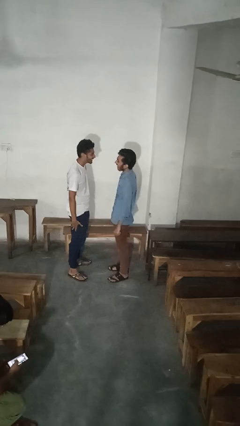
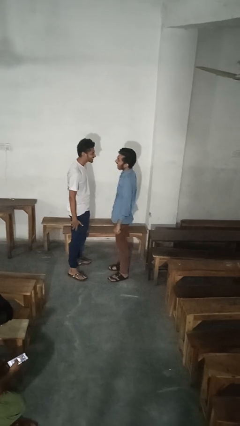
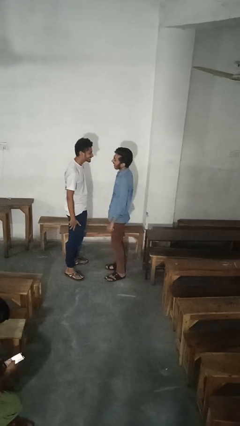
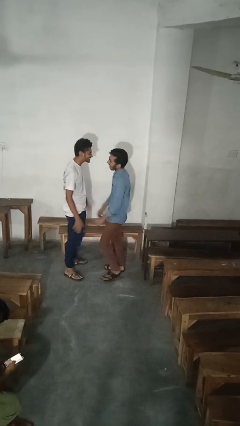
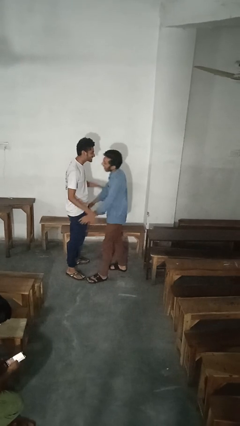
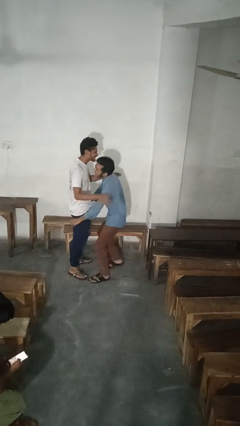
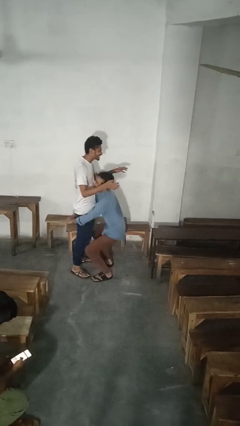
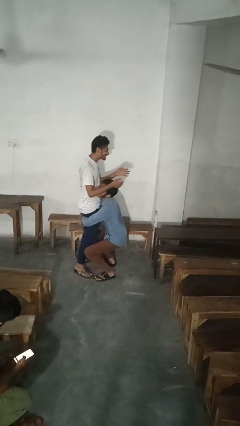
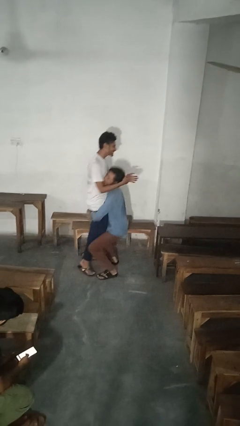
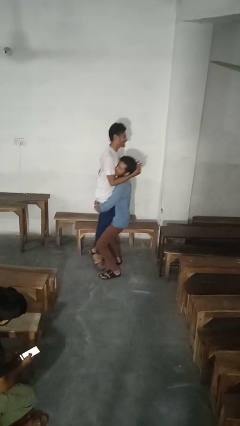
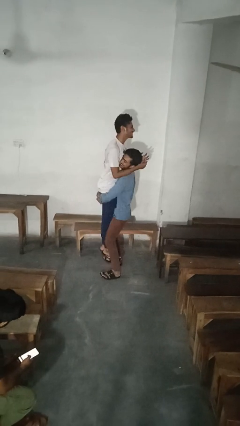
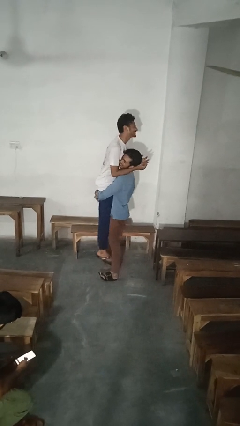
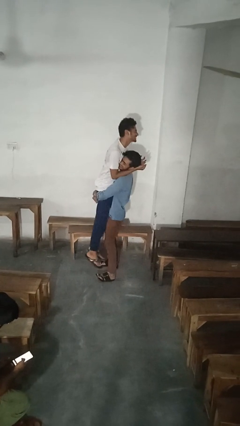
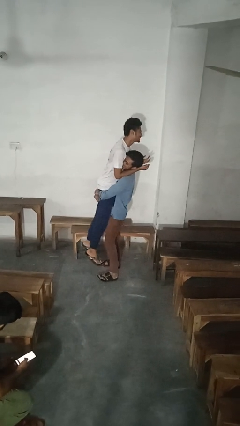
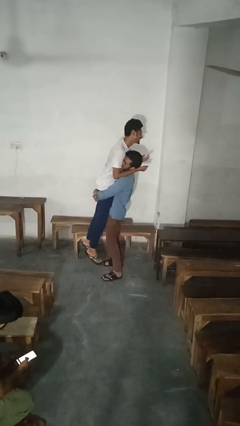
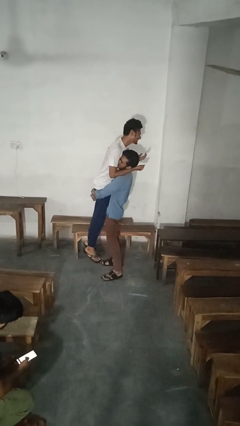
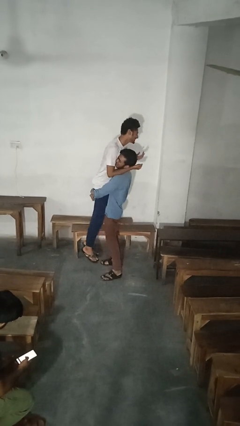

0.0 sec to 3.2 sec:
person picks up person

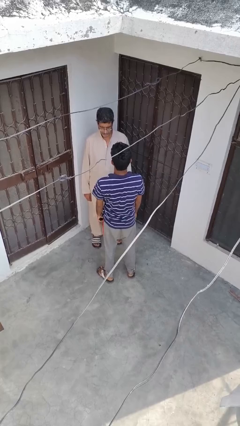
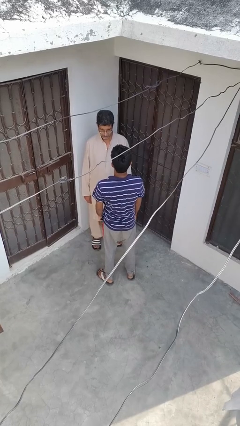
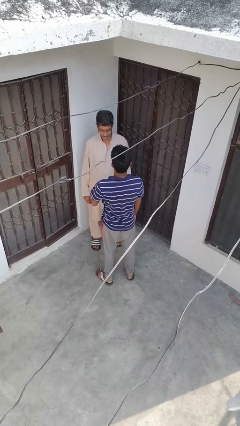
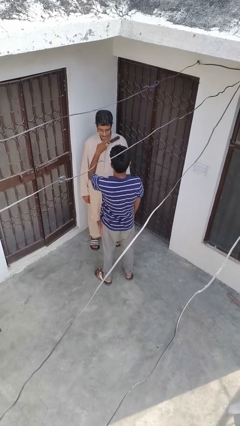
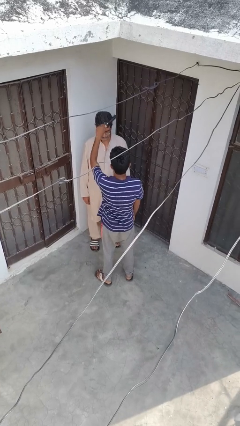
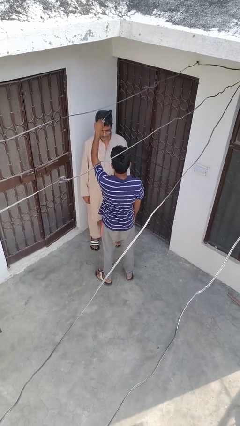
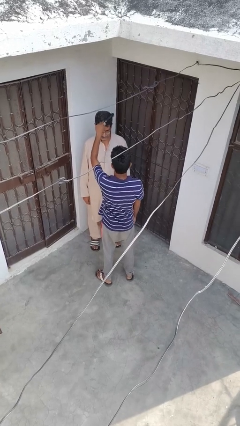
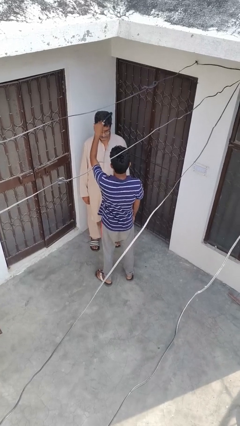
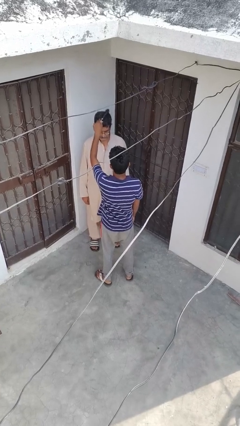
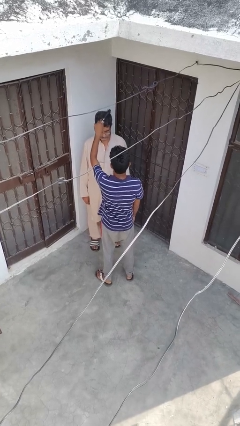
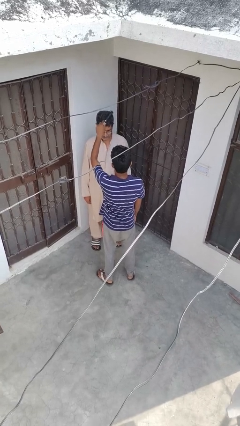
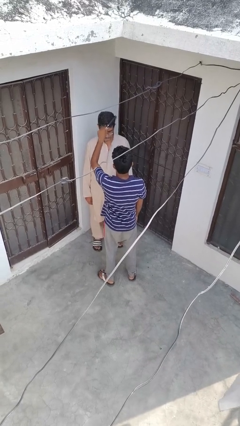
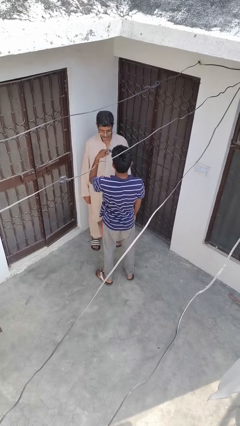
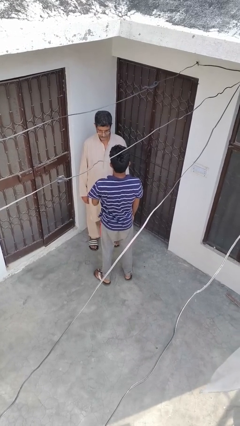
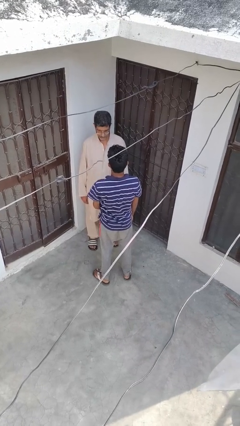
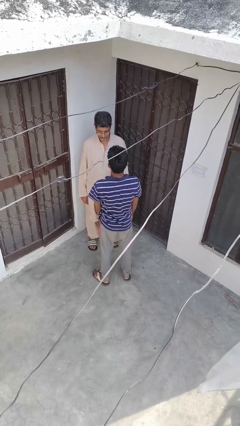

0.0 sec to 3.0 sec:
person brushes hair of person

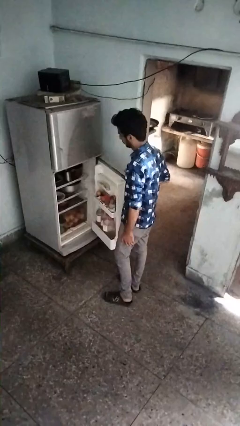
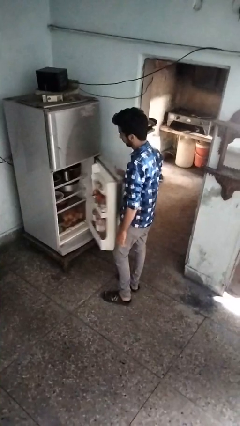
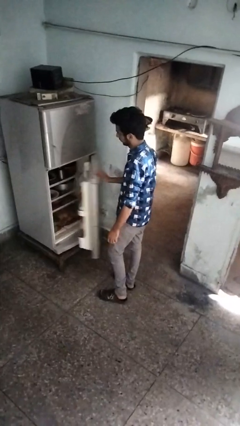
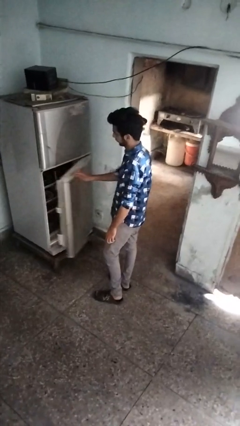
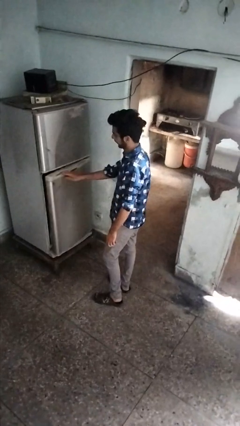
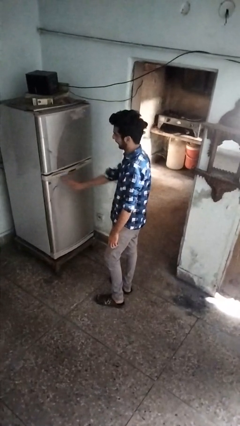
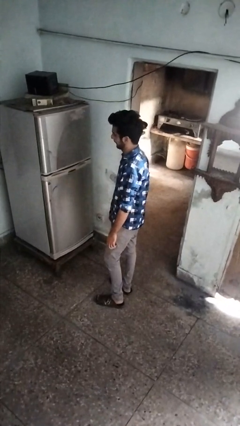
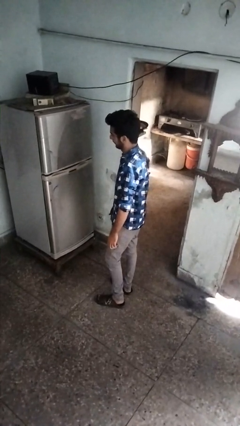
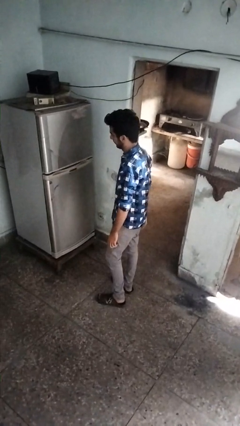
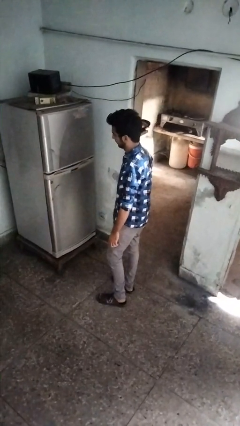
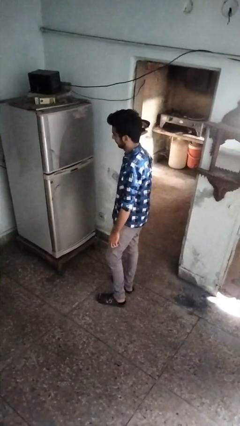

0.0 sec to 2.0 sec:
person closes refrigerator

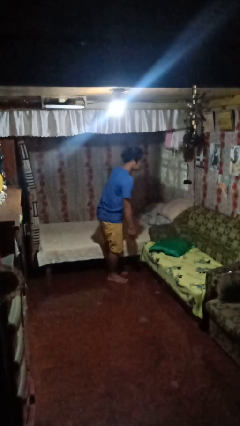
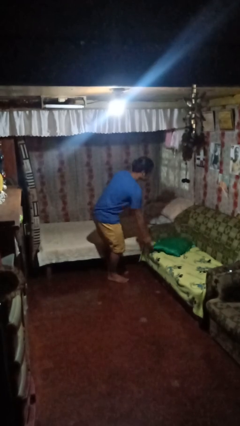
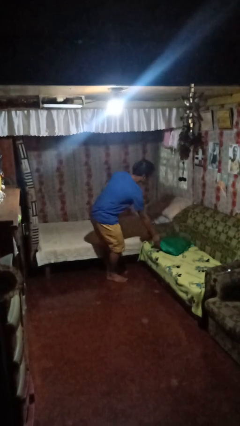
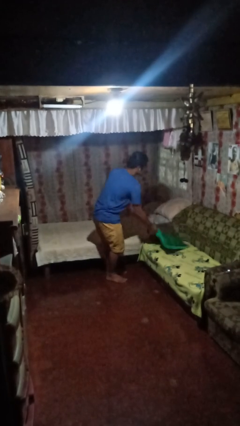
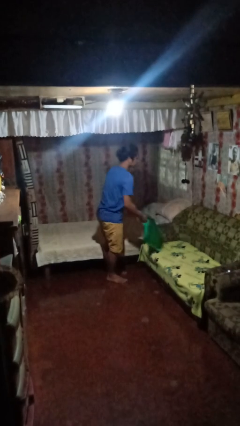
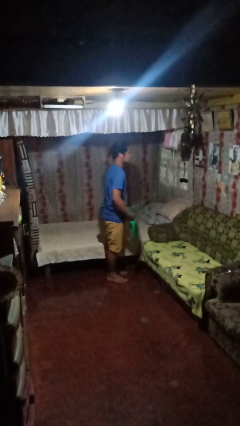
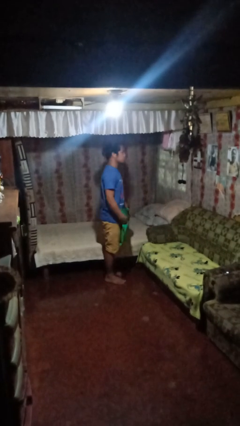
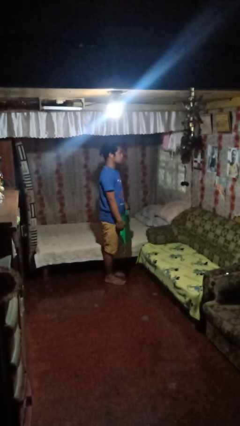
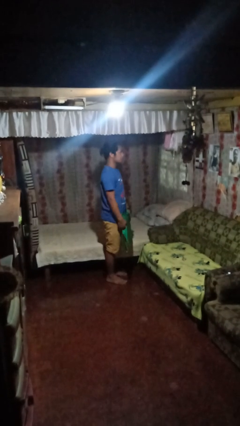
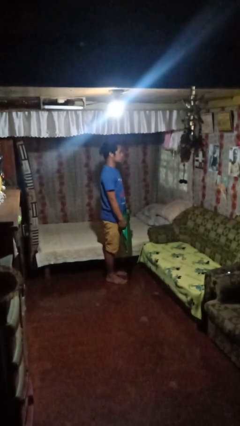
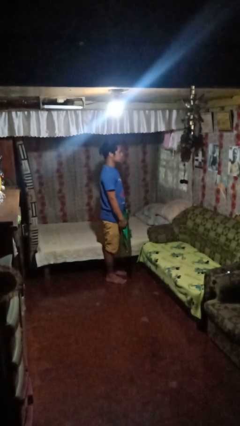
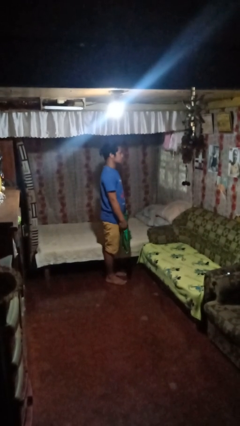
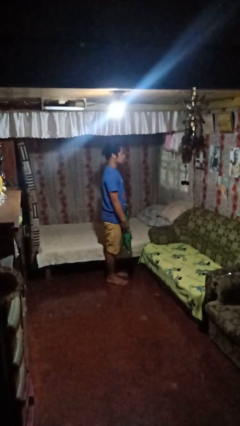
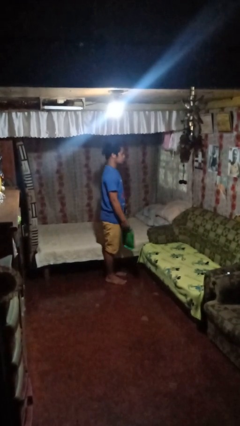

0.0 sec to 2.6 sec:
person picks up object from couch

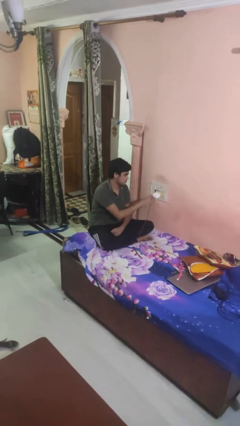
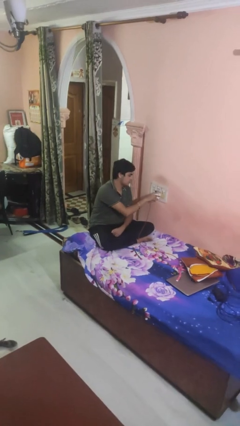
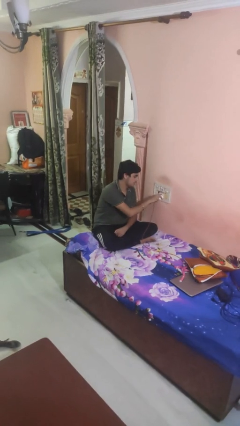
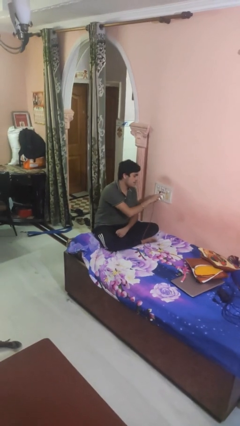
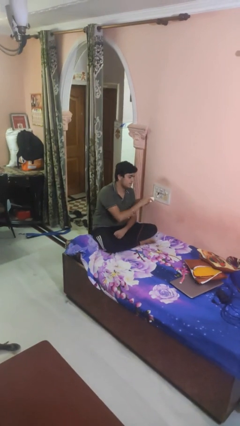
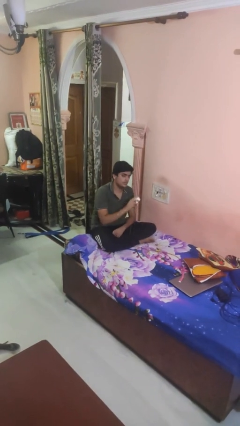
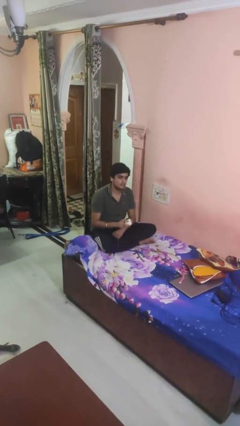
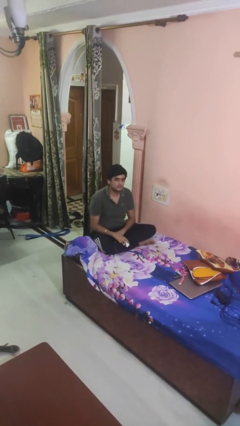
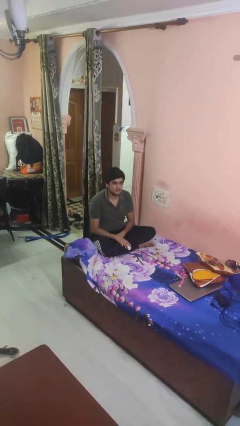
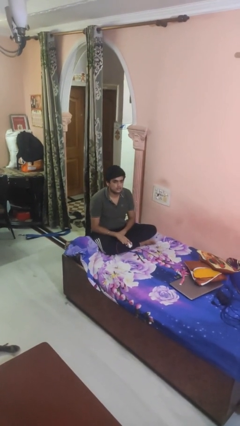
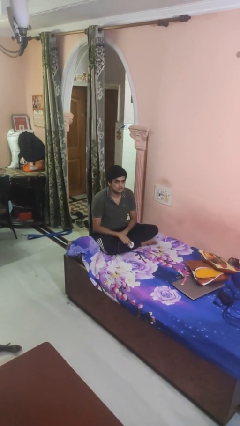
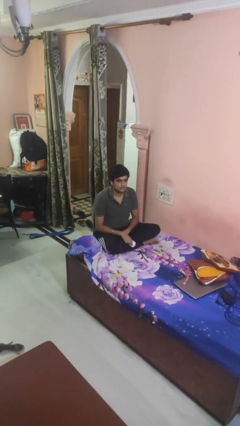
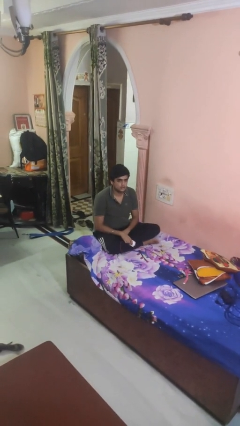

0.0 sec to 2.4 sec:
person unplugs from electrical socket

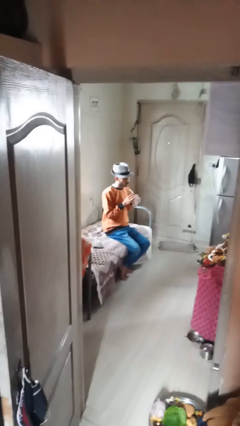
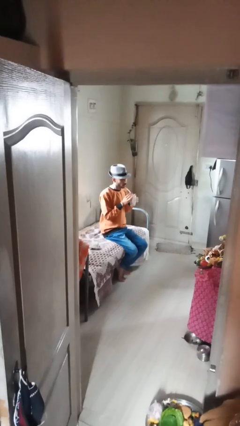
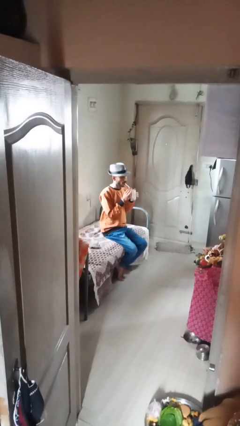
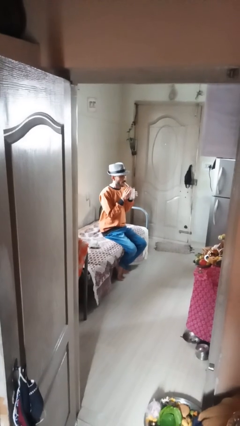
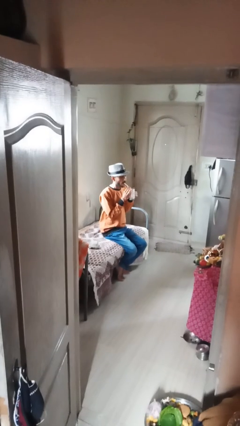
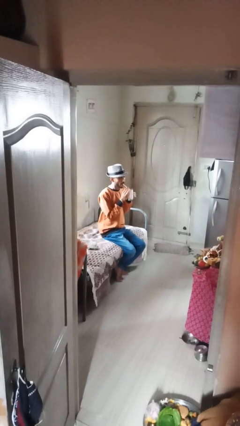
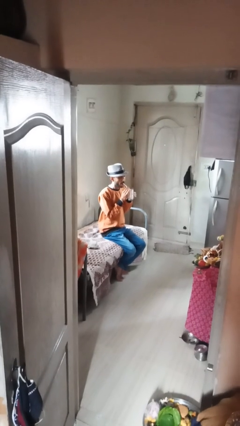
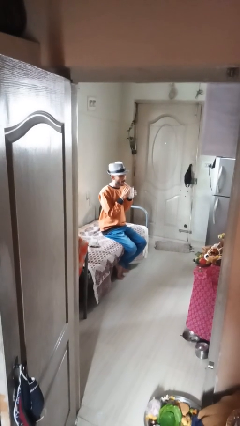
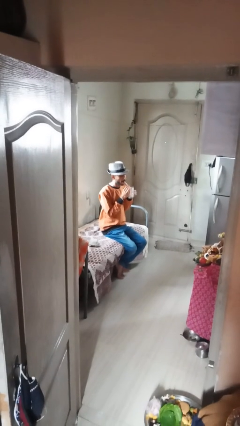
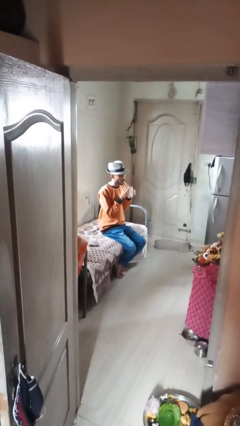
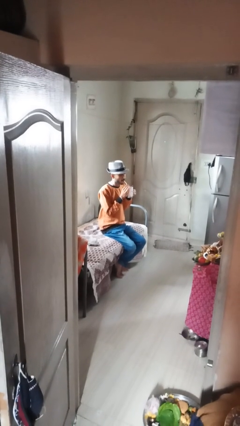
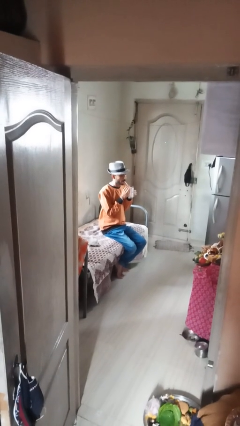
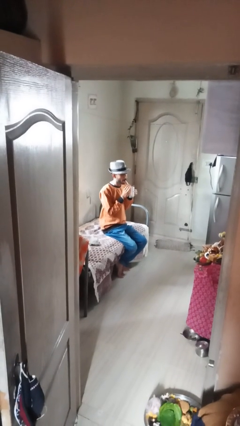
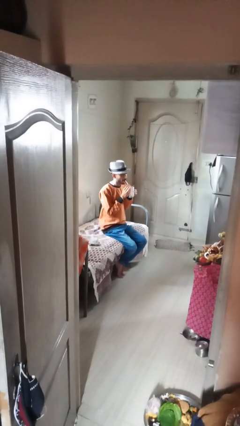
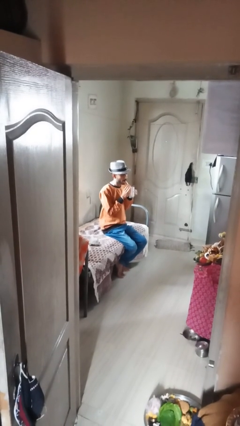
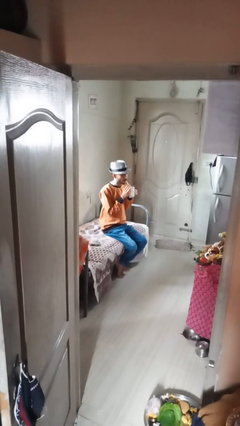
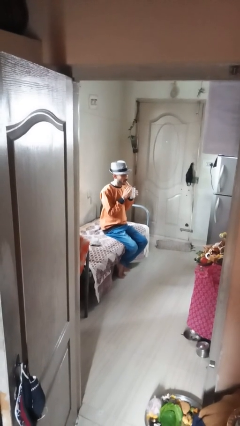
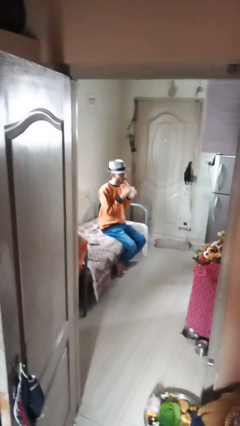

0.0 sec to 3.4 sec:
person drinks from straw

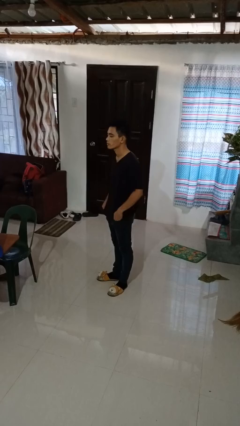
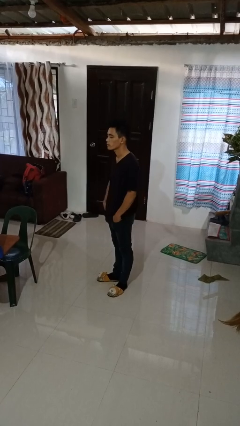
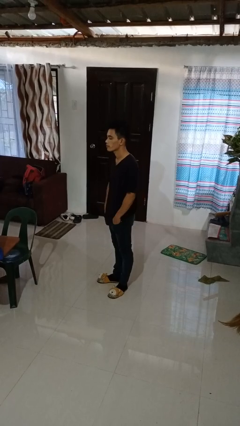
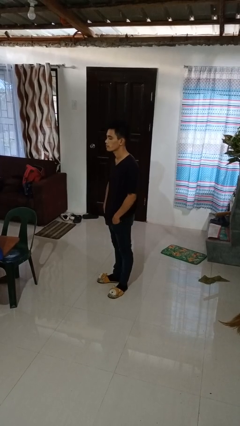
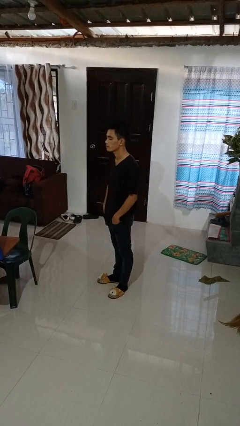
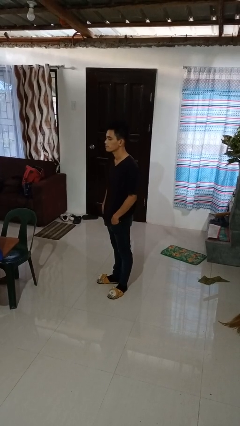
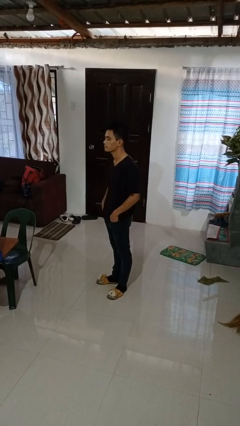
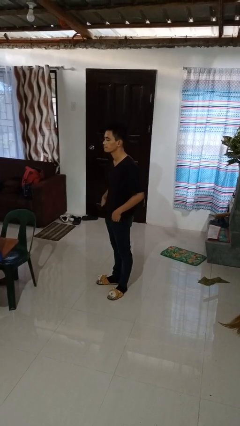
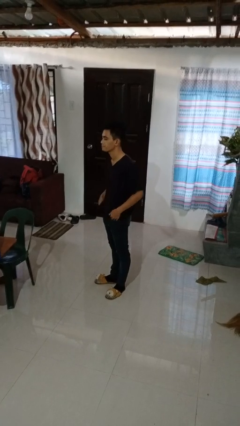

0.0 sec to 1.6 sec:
person puts hands in back pockets
